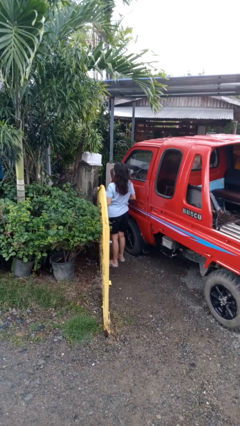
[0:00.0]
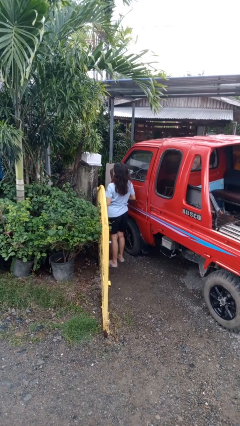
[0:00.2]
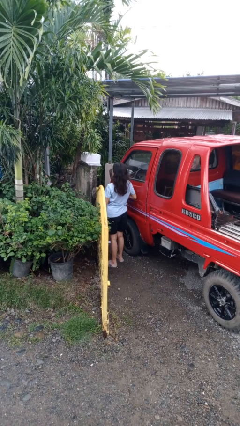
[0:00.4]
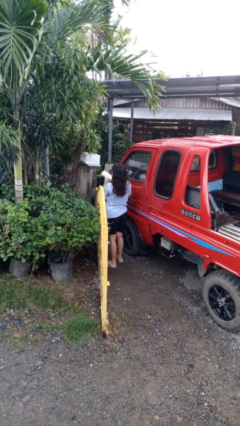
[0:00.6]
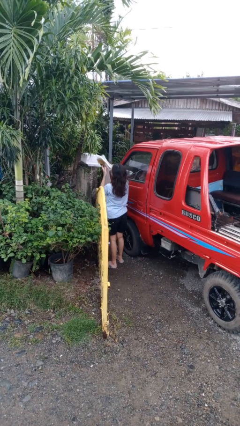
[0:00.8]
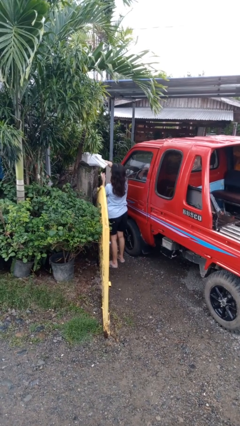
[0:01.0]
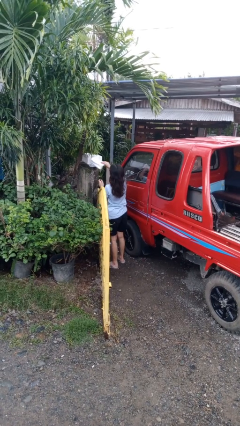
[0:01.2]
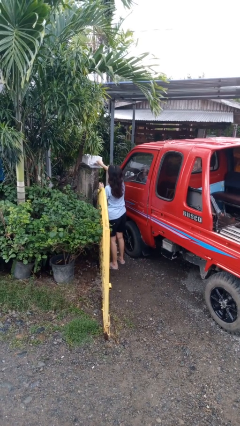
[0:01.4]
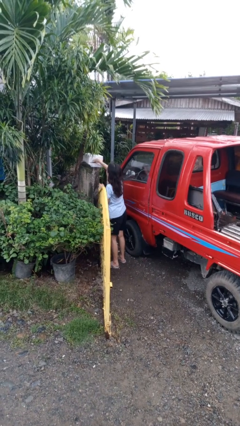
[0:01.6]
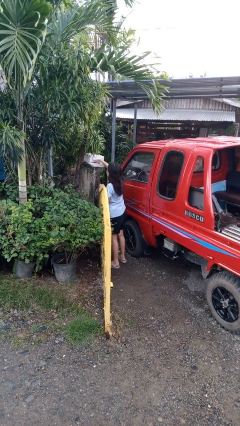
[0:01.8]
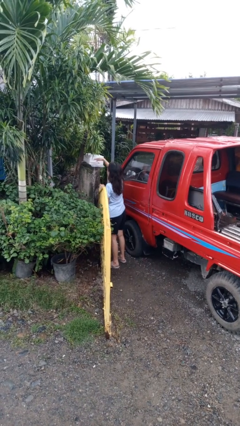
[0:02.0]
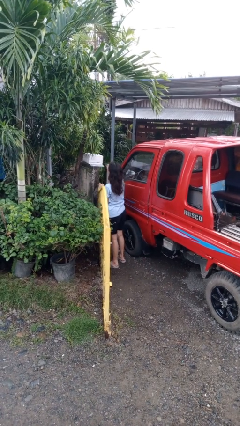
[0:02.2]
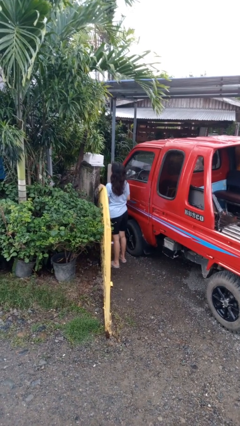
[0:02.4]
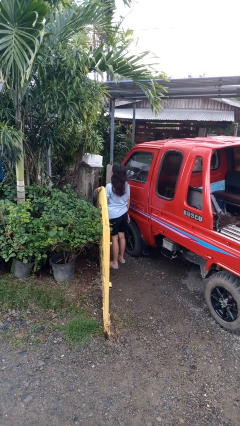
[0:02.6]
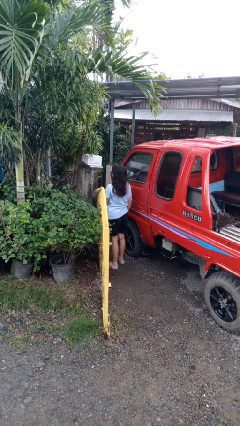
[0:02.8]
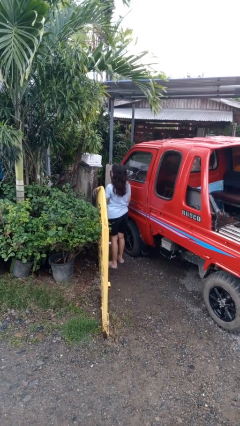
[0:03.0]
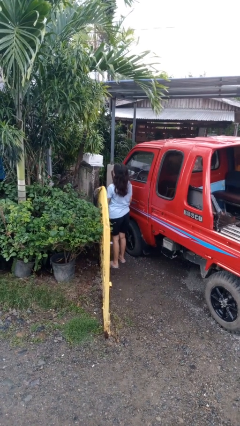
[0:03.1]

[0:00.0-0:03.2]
person puts letters in mailbox

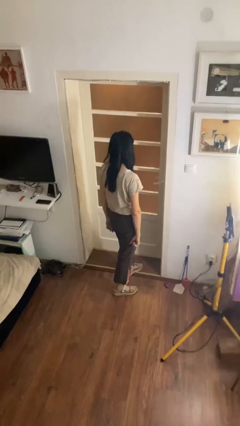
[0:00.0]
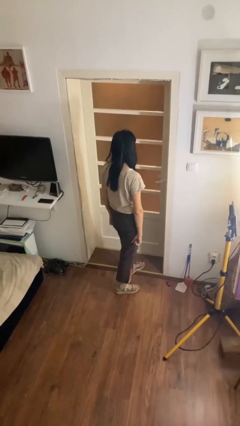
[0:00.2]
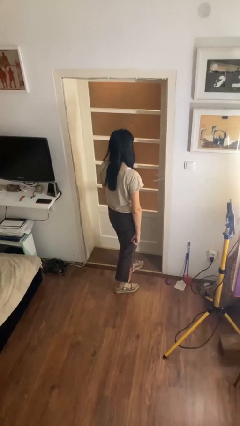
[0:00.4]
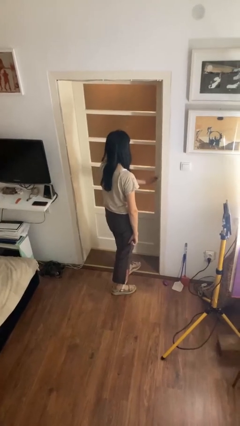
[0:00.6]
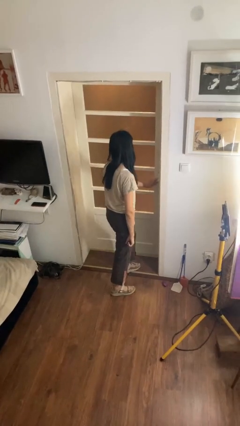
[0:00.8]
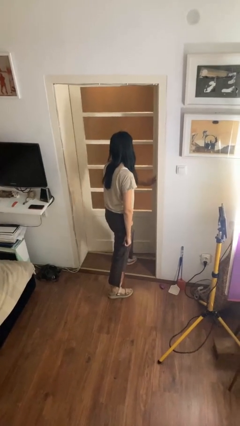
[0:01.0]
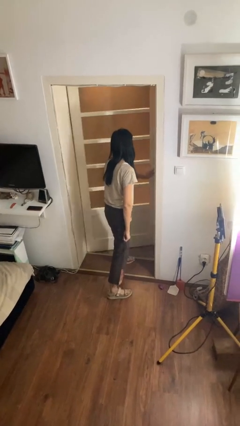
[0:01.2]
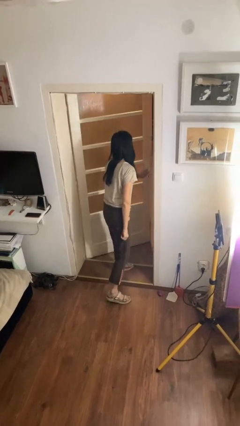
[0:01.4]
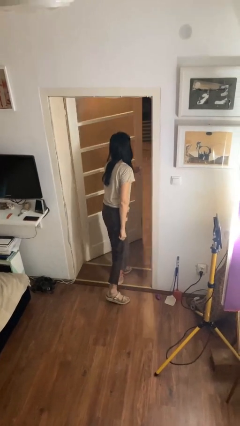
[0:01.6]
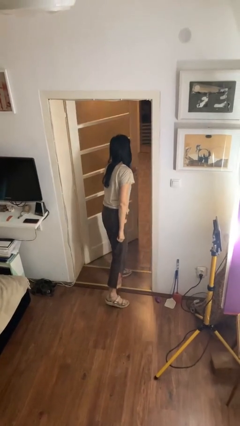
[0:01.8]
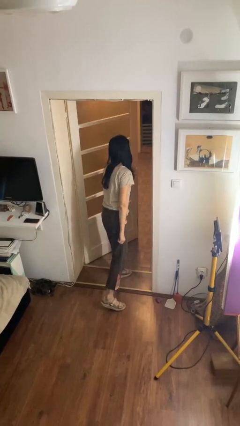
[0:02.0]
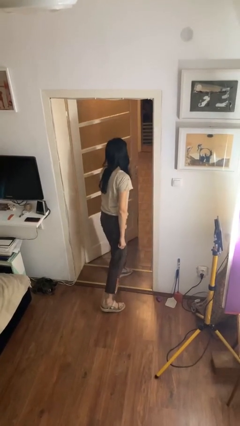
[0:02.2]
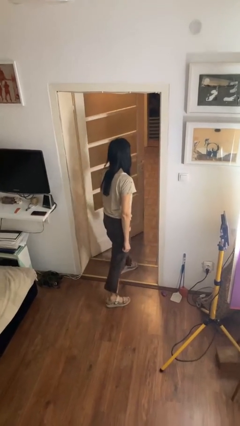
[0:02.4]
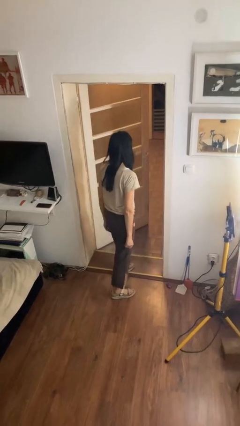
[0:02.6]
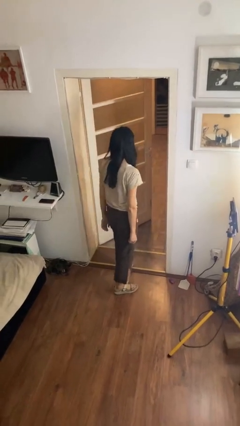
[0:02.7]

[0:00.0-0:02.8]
person opens facility door

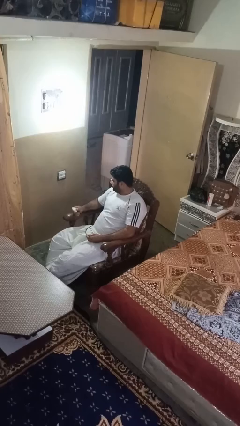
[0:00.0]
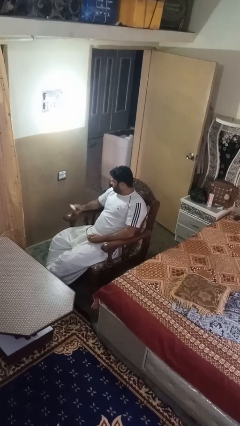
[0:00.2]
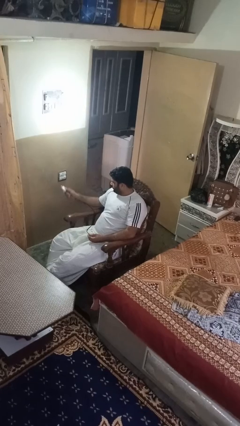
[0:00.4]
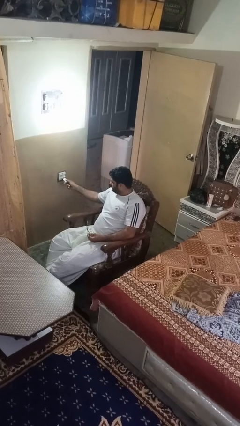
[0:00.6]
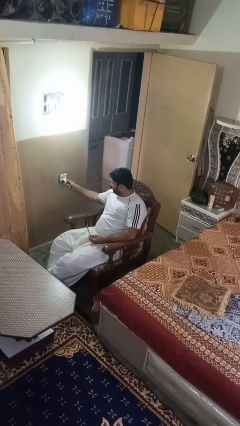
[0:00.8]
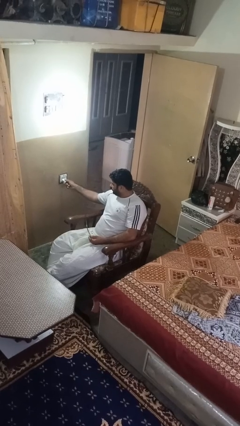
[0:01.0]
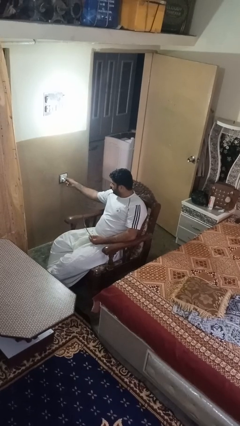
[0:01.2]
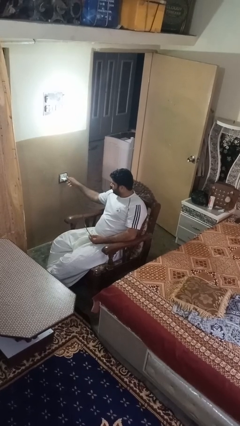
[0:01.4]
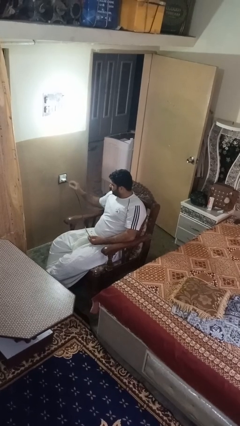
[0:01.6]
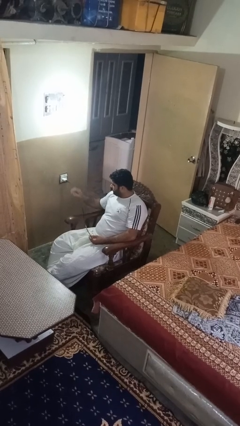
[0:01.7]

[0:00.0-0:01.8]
person plugs into electrical socket

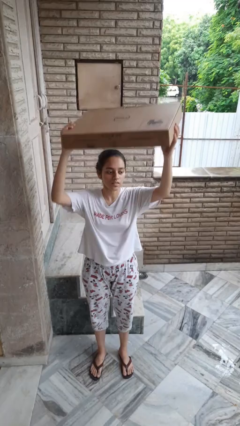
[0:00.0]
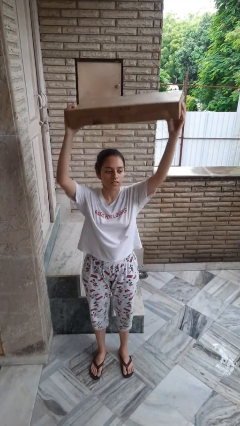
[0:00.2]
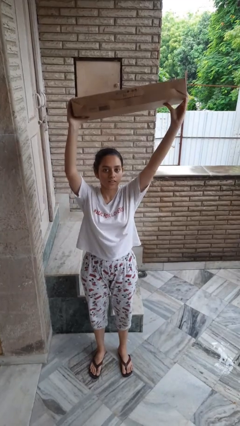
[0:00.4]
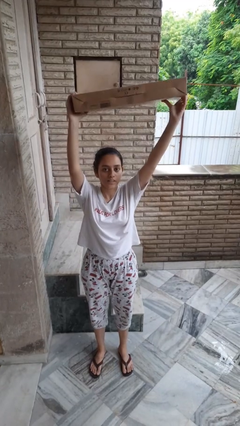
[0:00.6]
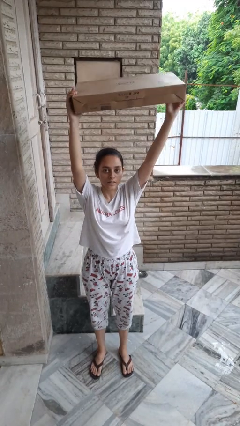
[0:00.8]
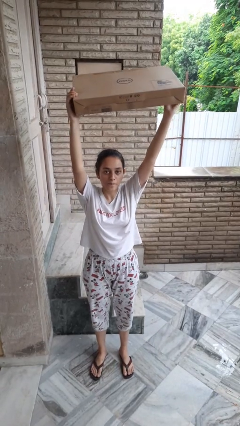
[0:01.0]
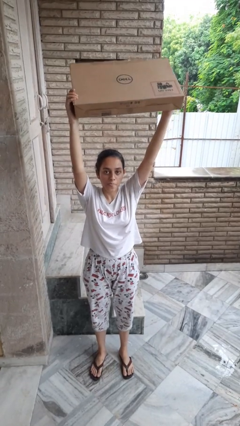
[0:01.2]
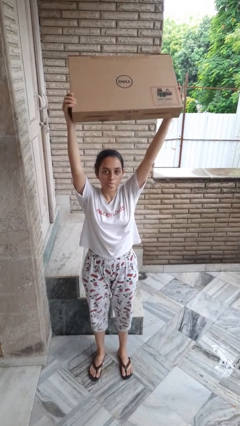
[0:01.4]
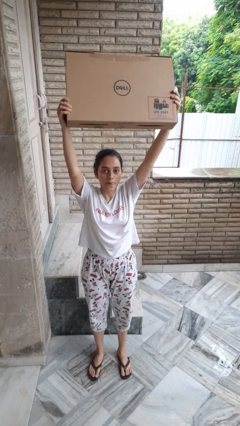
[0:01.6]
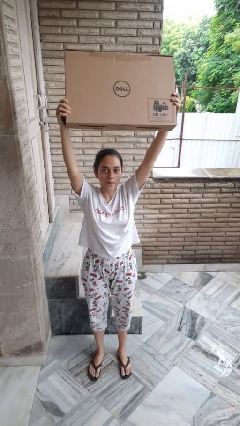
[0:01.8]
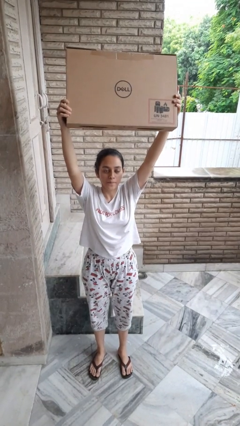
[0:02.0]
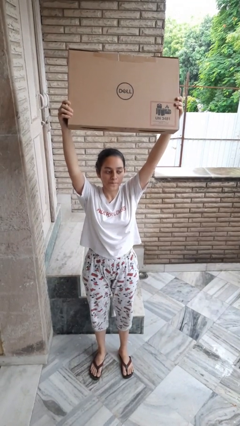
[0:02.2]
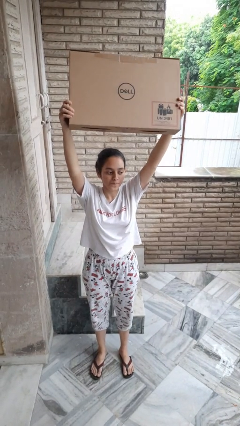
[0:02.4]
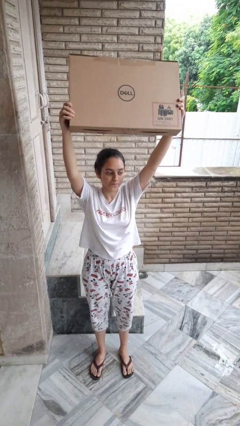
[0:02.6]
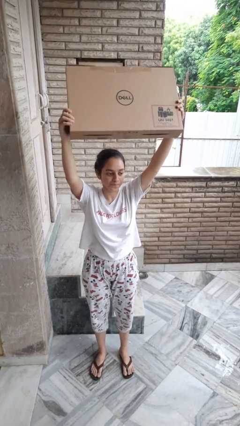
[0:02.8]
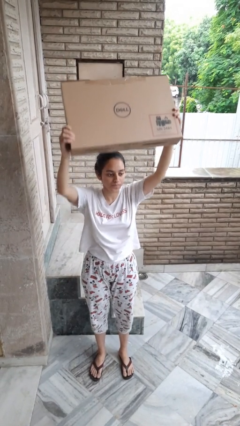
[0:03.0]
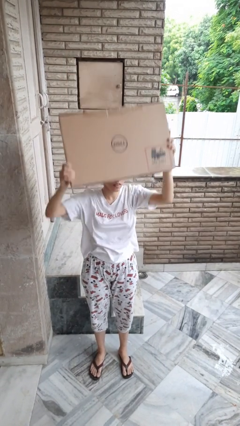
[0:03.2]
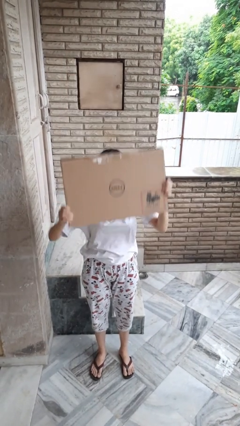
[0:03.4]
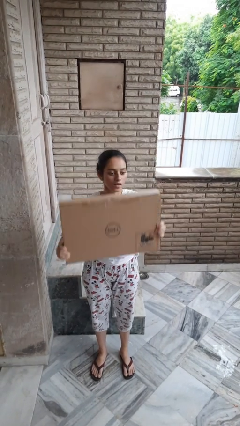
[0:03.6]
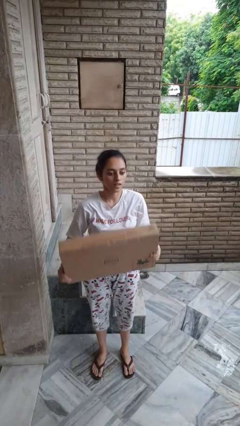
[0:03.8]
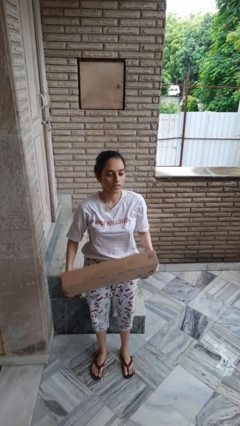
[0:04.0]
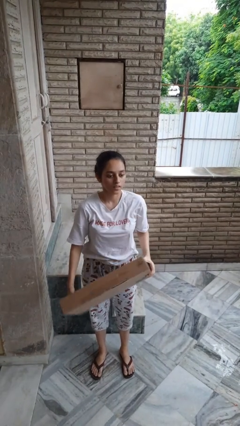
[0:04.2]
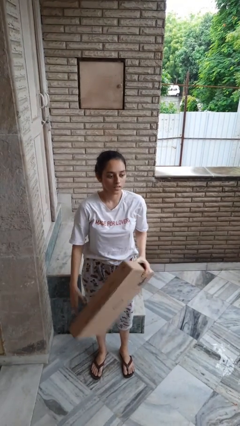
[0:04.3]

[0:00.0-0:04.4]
person holds object above head

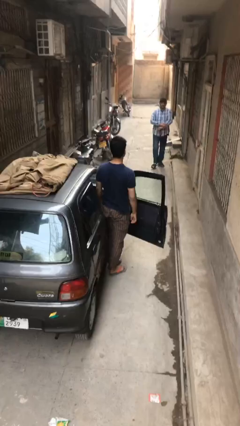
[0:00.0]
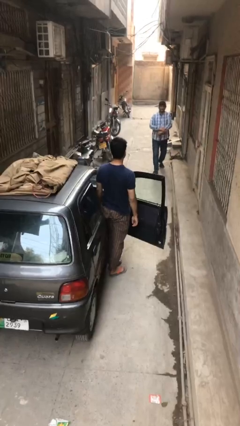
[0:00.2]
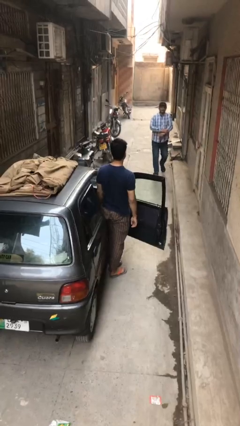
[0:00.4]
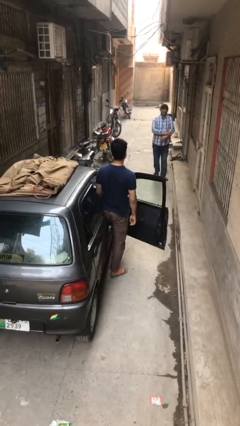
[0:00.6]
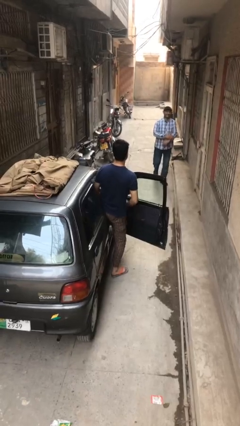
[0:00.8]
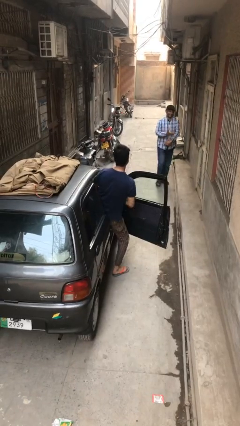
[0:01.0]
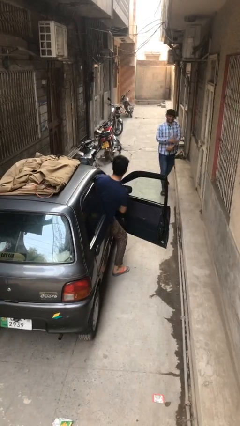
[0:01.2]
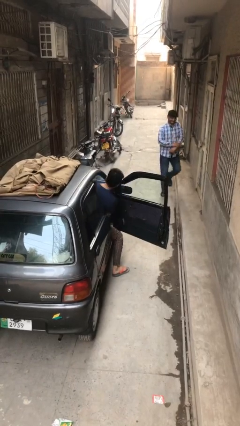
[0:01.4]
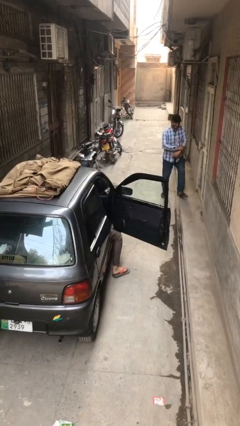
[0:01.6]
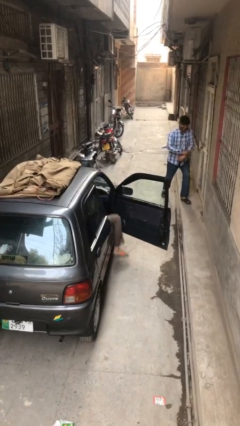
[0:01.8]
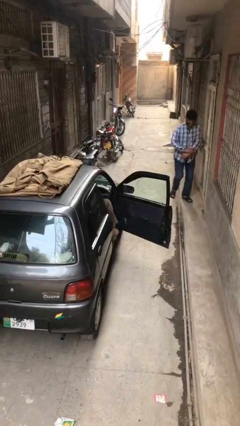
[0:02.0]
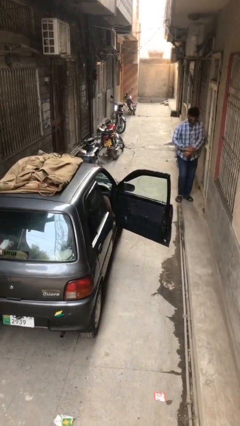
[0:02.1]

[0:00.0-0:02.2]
person enters car

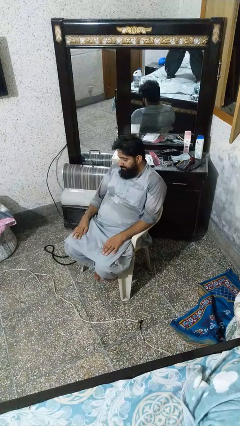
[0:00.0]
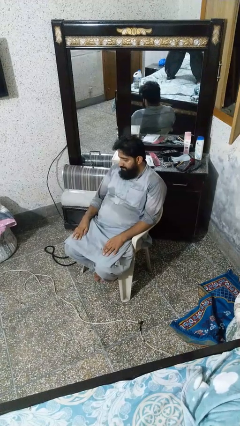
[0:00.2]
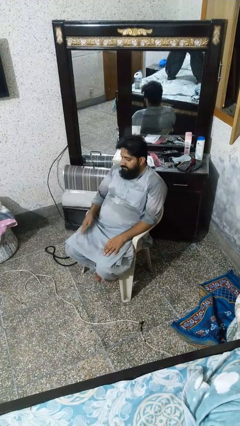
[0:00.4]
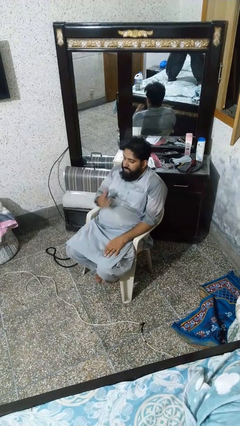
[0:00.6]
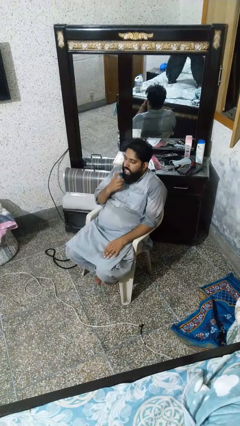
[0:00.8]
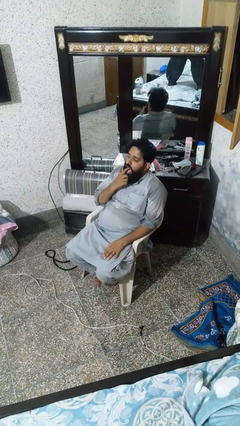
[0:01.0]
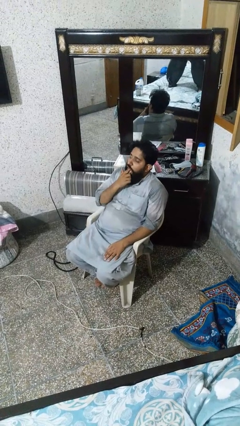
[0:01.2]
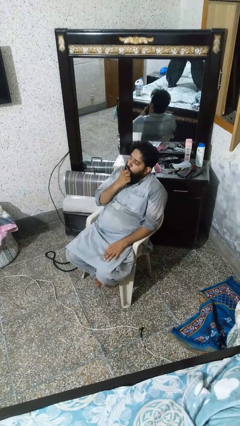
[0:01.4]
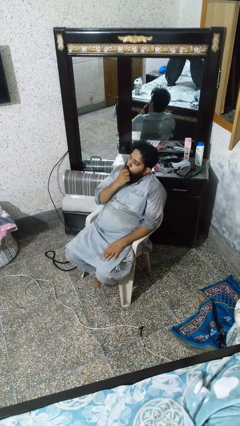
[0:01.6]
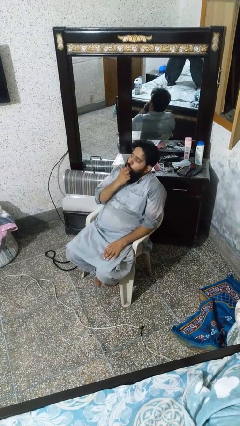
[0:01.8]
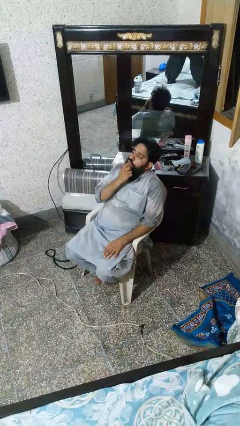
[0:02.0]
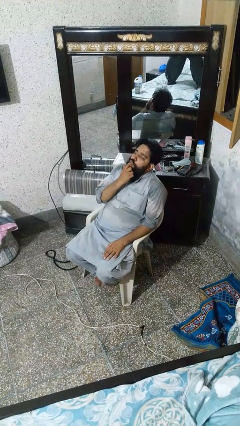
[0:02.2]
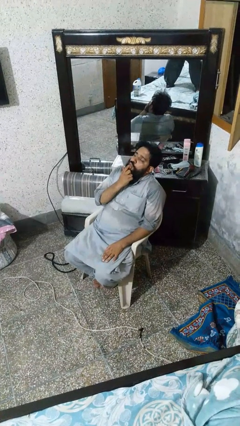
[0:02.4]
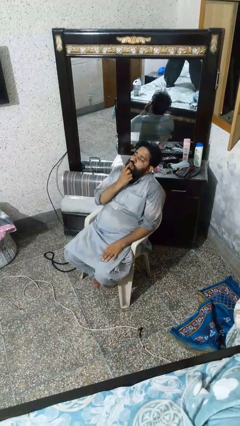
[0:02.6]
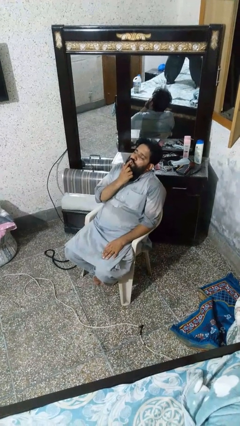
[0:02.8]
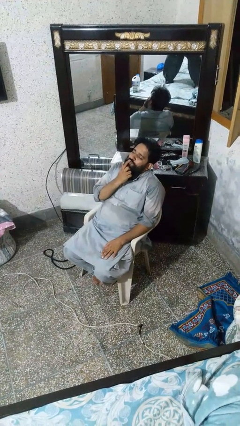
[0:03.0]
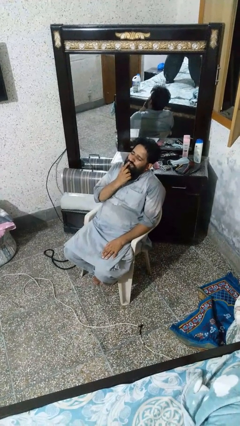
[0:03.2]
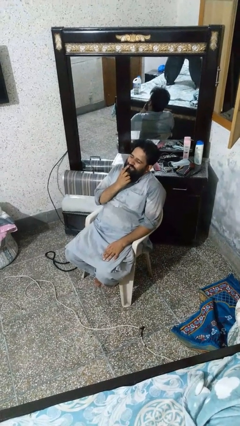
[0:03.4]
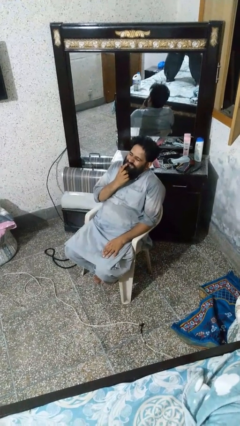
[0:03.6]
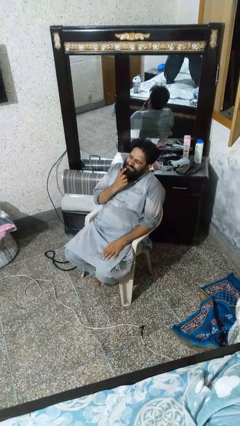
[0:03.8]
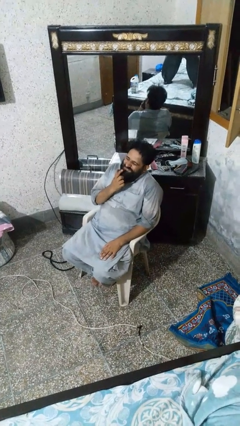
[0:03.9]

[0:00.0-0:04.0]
person licks fingers
